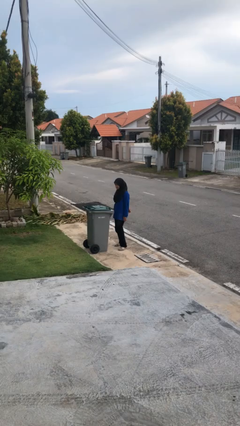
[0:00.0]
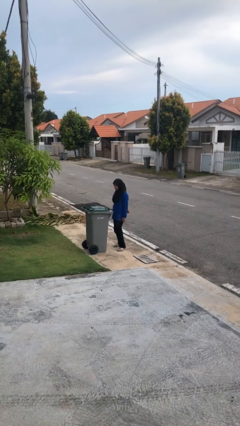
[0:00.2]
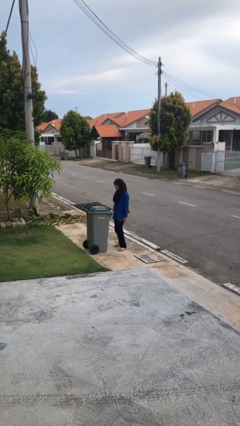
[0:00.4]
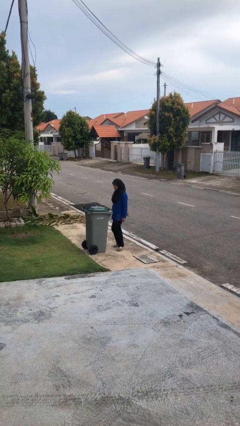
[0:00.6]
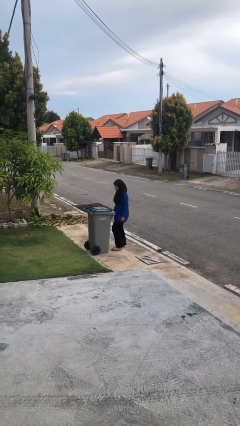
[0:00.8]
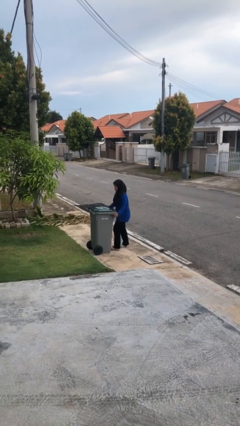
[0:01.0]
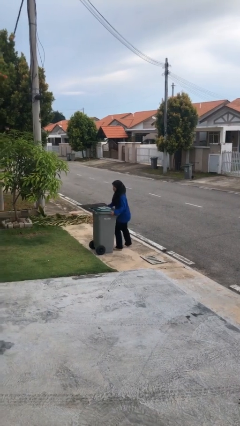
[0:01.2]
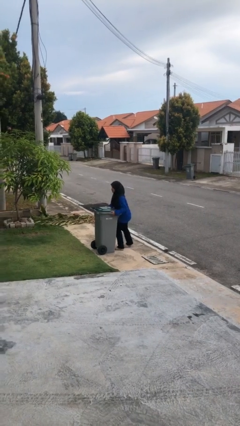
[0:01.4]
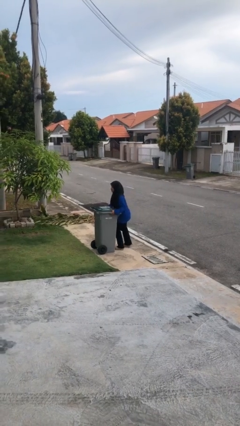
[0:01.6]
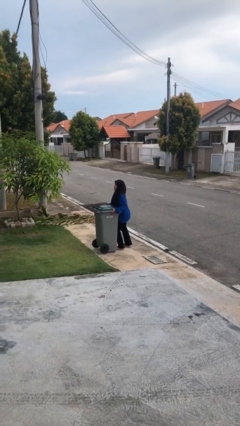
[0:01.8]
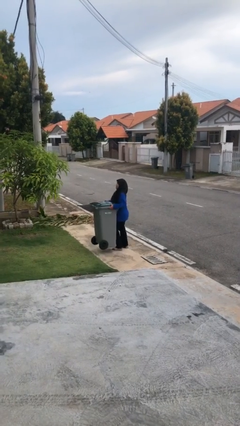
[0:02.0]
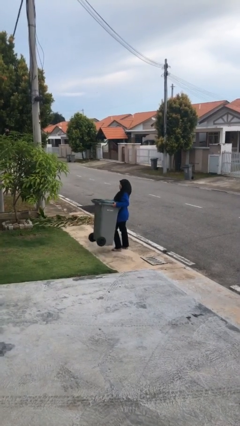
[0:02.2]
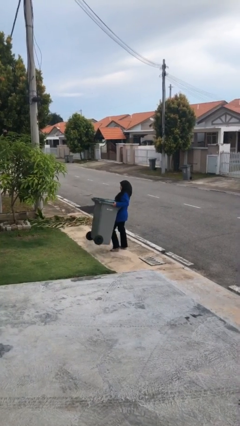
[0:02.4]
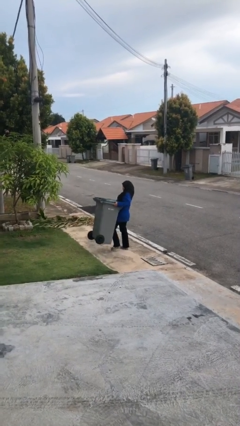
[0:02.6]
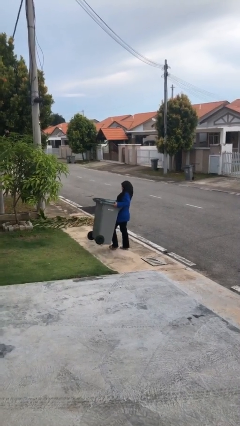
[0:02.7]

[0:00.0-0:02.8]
person picks up object from floor

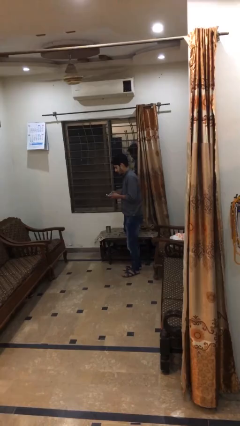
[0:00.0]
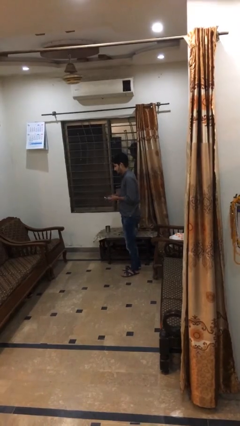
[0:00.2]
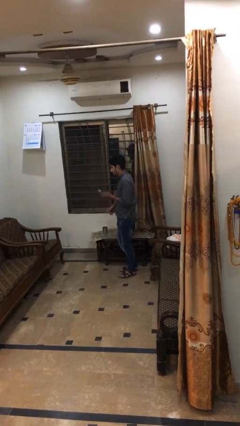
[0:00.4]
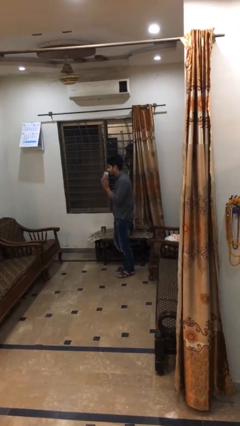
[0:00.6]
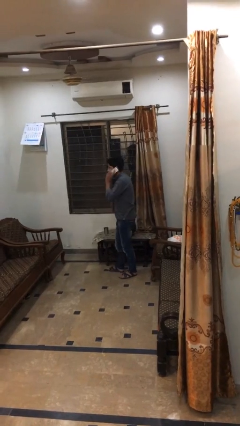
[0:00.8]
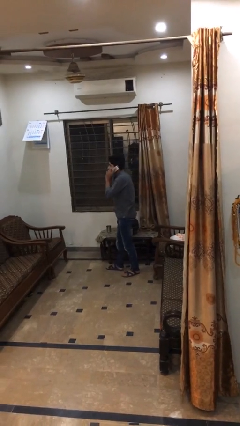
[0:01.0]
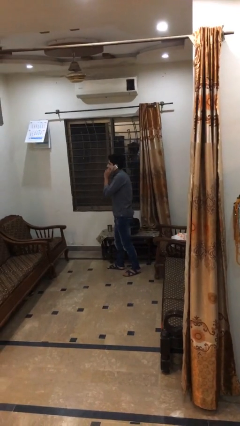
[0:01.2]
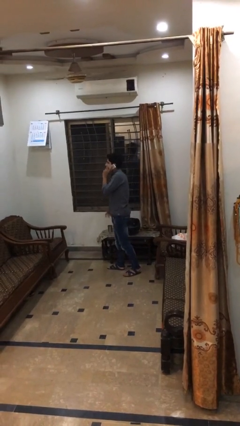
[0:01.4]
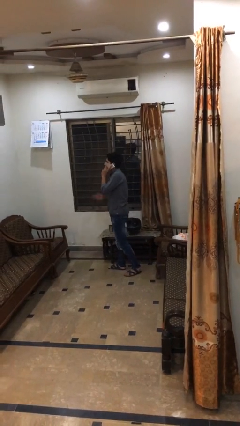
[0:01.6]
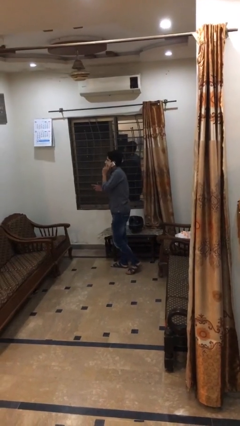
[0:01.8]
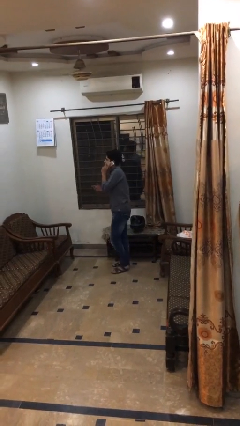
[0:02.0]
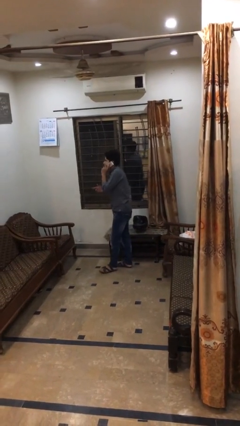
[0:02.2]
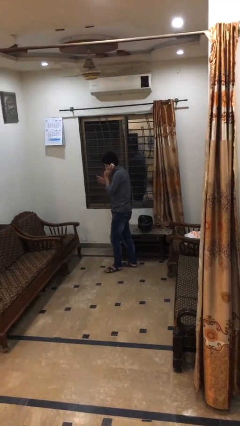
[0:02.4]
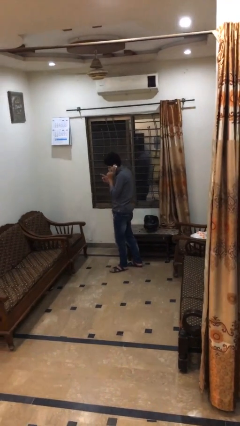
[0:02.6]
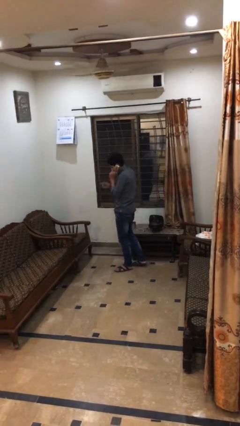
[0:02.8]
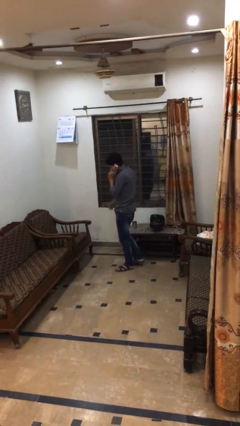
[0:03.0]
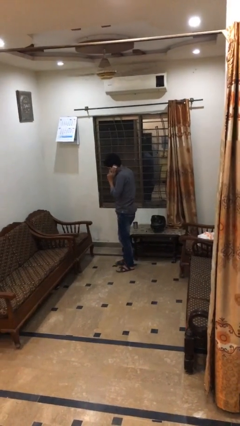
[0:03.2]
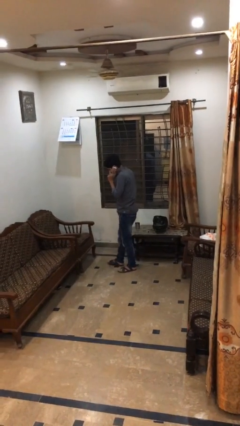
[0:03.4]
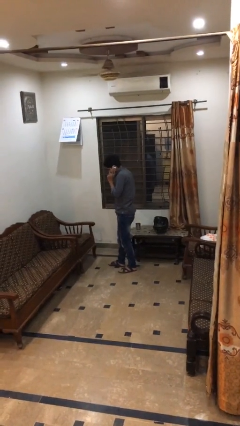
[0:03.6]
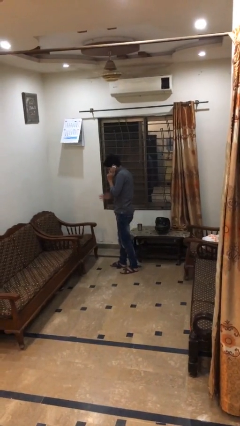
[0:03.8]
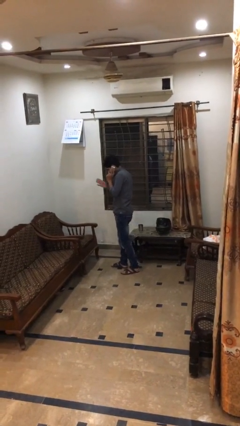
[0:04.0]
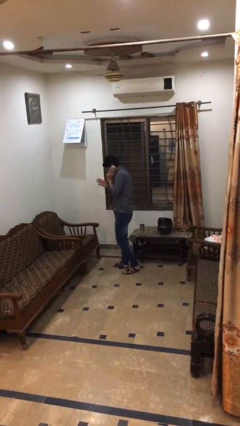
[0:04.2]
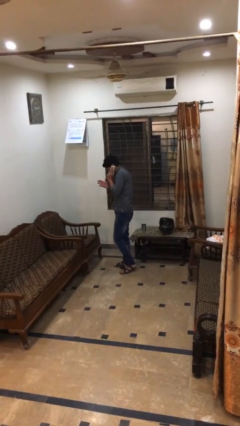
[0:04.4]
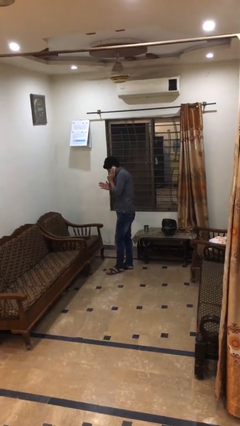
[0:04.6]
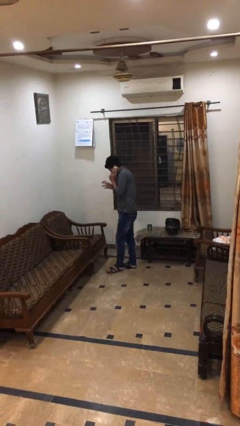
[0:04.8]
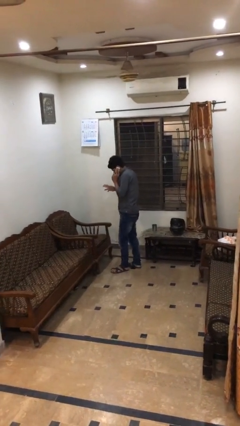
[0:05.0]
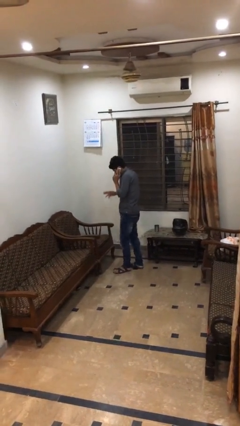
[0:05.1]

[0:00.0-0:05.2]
person talks on phone

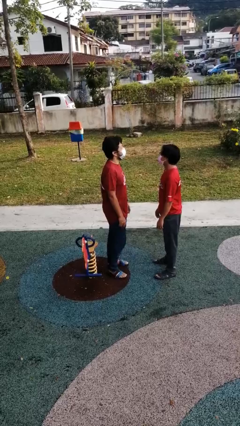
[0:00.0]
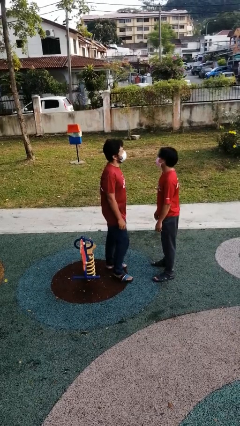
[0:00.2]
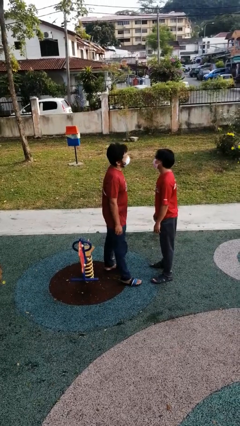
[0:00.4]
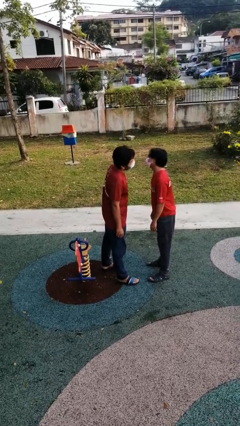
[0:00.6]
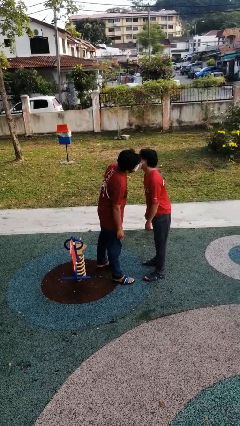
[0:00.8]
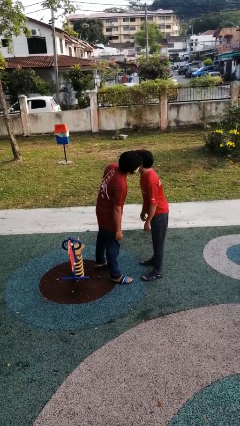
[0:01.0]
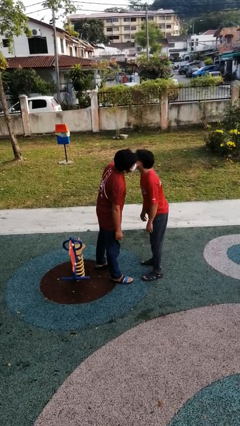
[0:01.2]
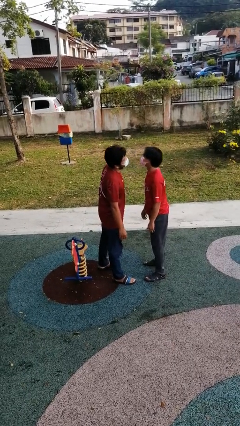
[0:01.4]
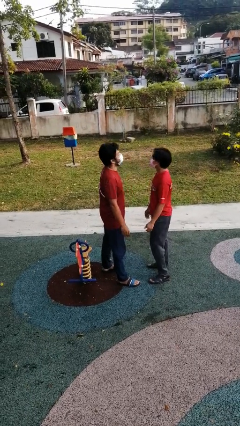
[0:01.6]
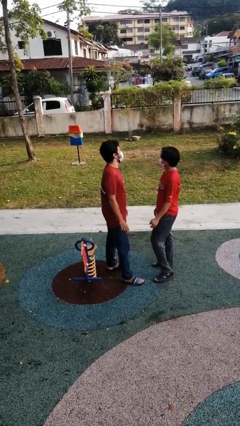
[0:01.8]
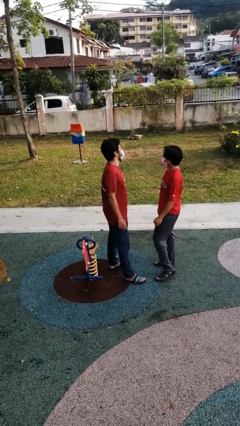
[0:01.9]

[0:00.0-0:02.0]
person kisses cheek of person

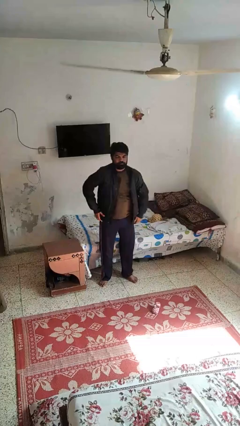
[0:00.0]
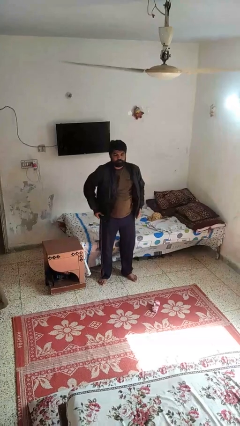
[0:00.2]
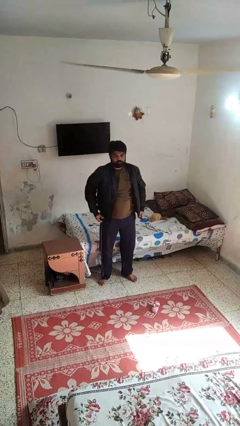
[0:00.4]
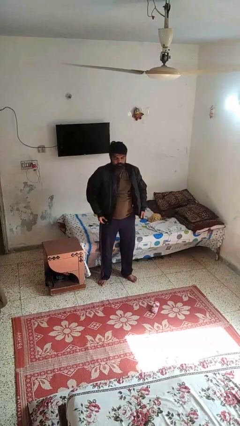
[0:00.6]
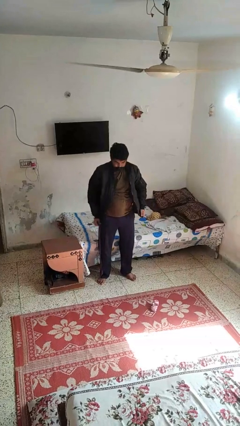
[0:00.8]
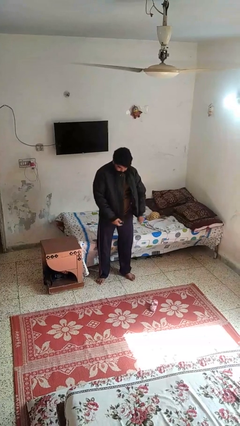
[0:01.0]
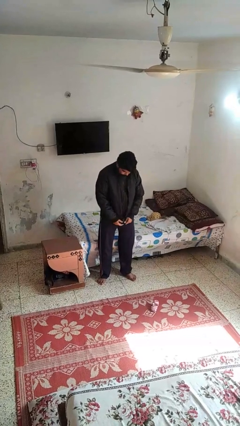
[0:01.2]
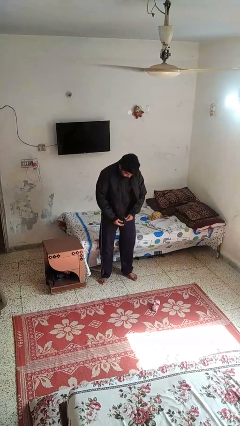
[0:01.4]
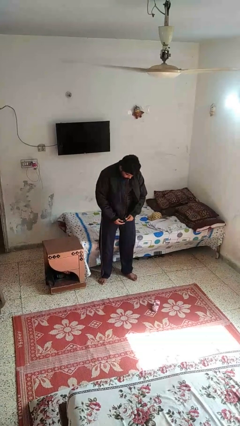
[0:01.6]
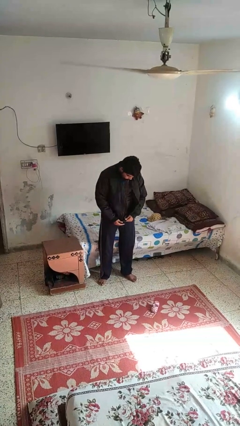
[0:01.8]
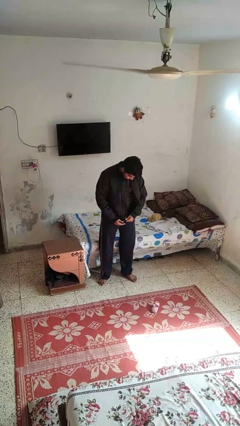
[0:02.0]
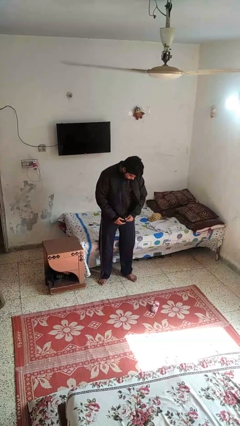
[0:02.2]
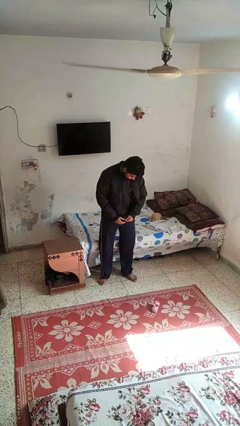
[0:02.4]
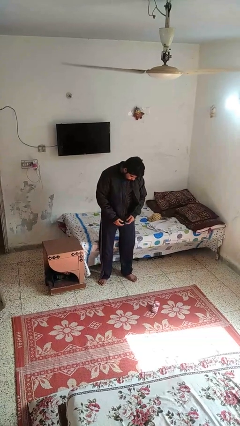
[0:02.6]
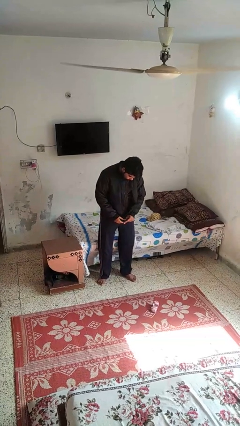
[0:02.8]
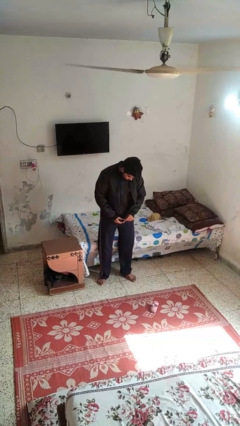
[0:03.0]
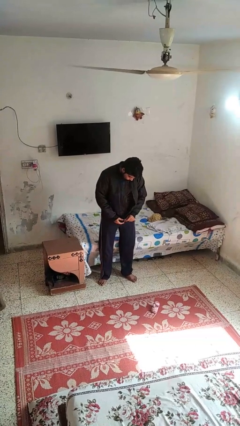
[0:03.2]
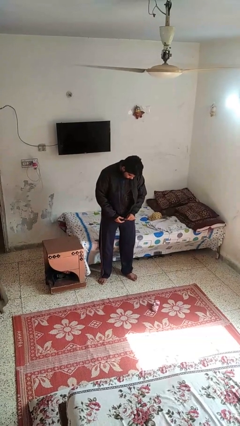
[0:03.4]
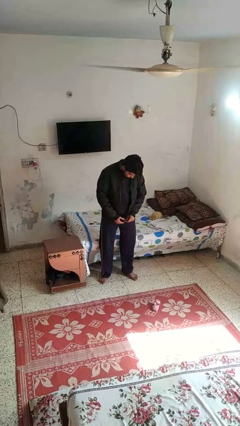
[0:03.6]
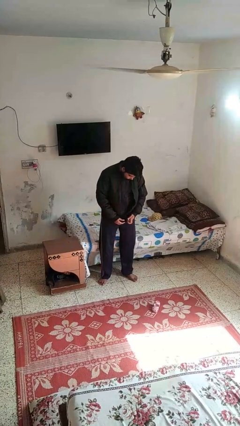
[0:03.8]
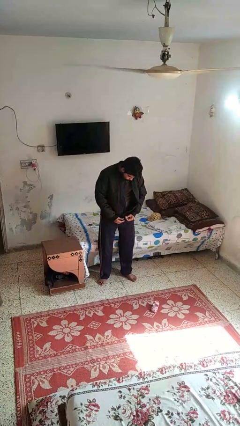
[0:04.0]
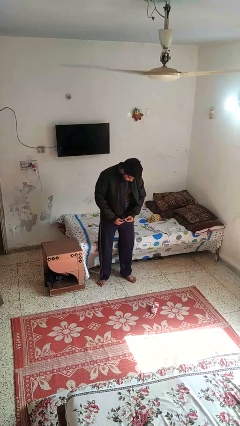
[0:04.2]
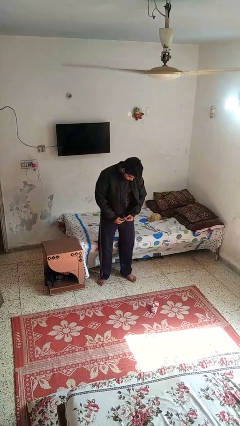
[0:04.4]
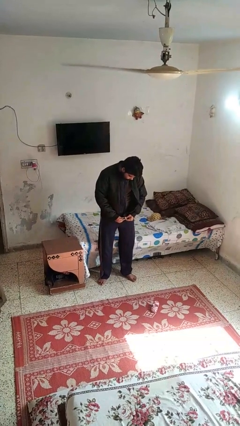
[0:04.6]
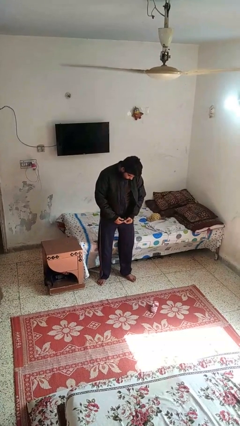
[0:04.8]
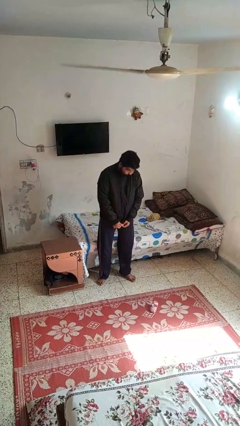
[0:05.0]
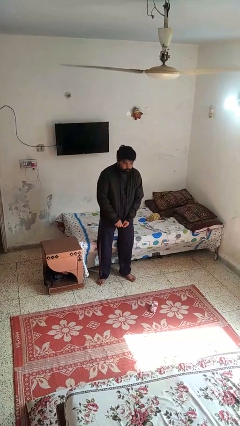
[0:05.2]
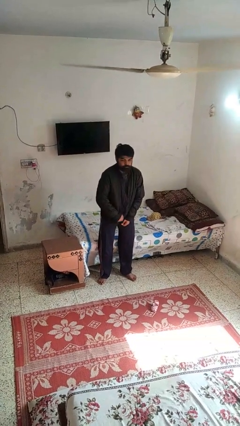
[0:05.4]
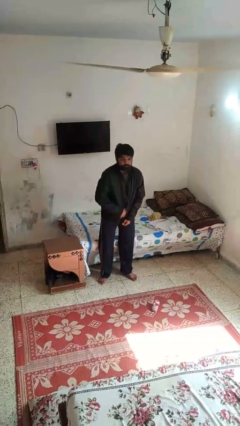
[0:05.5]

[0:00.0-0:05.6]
person zips up jacket

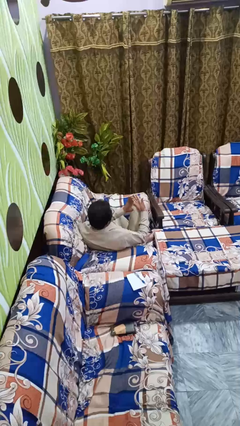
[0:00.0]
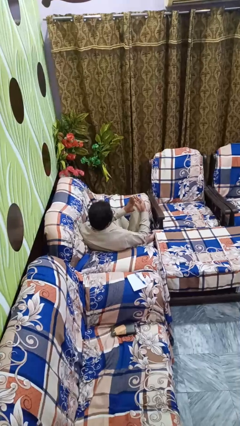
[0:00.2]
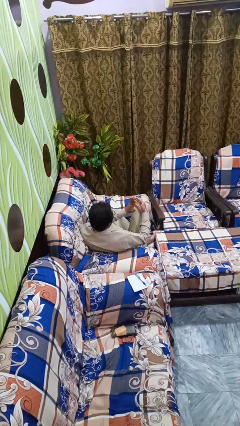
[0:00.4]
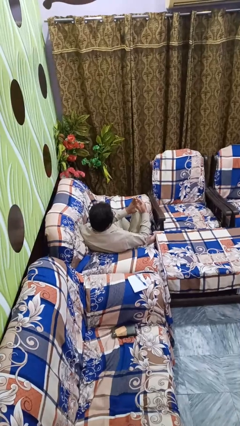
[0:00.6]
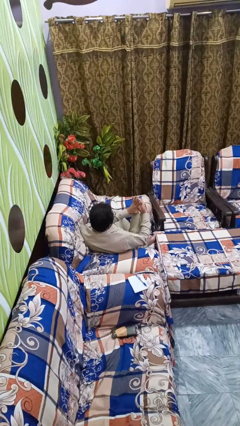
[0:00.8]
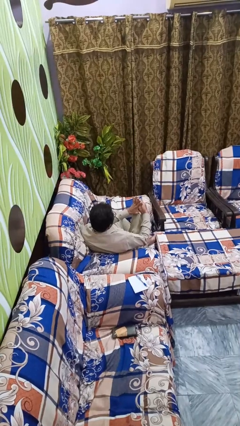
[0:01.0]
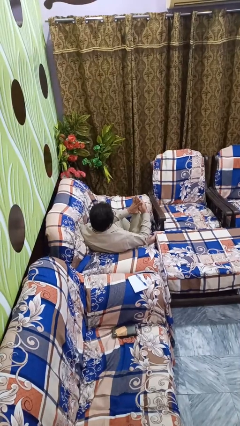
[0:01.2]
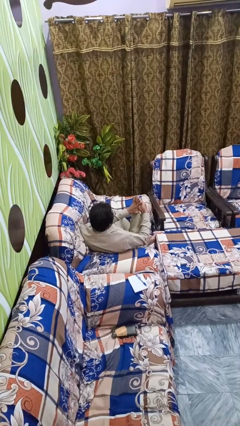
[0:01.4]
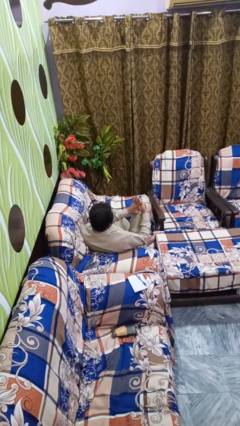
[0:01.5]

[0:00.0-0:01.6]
person gestures number five

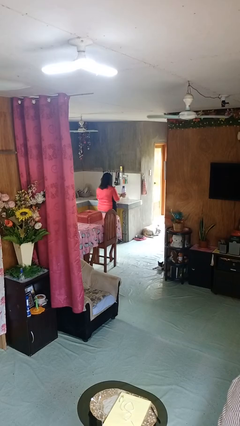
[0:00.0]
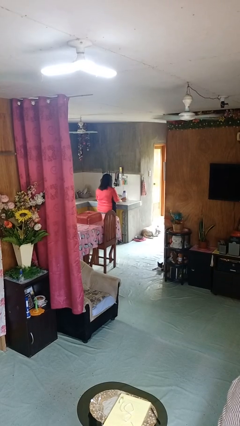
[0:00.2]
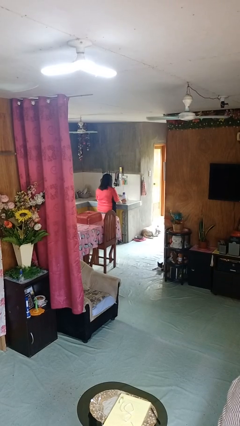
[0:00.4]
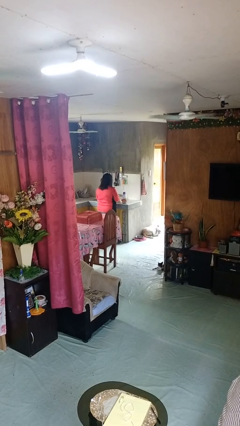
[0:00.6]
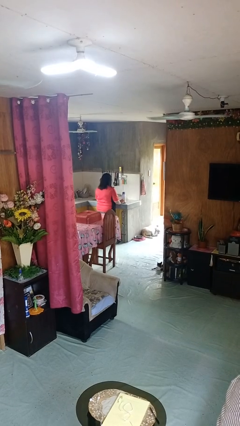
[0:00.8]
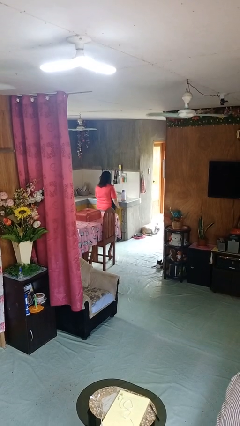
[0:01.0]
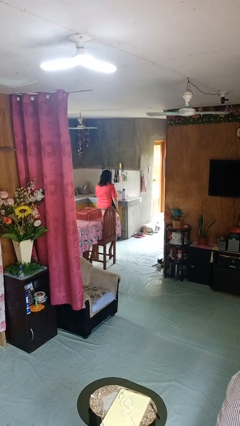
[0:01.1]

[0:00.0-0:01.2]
person puts down object on countertop
